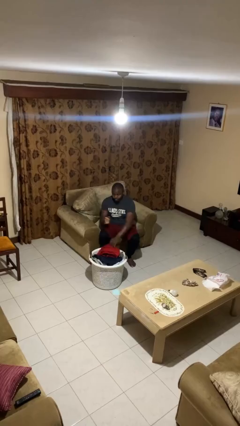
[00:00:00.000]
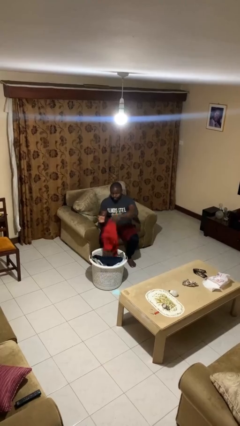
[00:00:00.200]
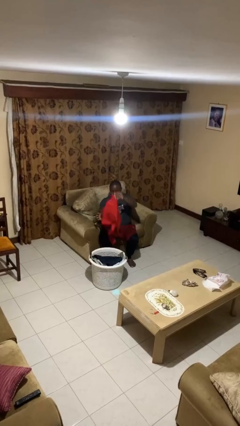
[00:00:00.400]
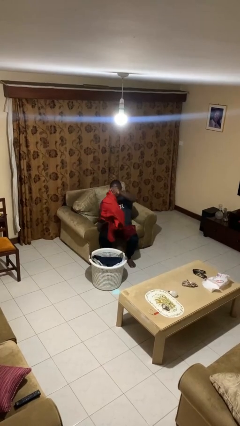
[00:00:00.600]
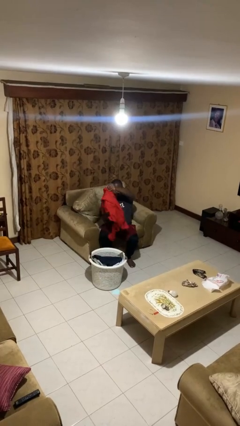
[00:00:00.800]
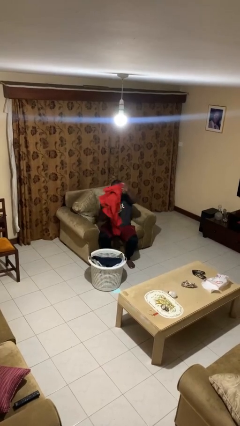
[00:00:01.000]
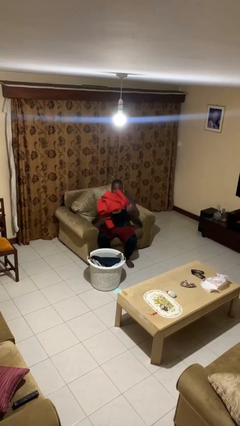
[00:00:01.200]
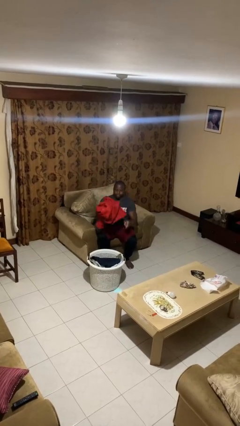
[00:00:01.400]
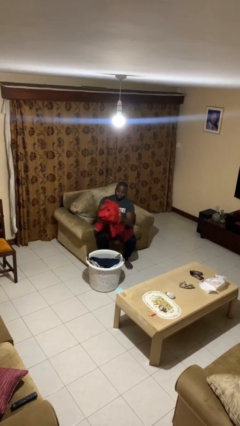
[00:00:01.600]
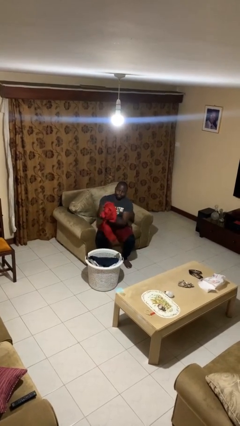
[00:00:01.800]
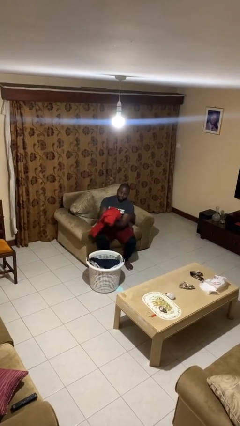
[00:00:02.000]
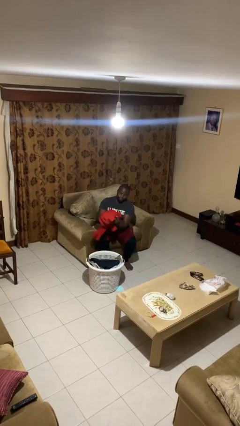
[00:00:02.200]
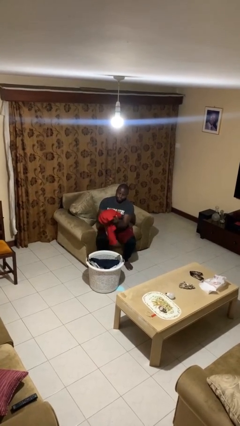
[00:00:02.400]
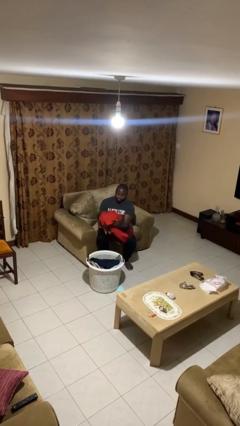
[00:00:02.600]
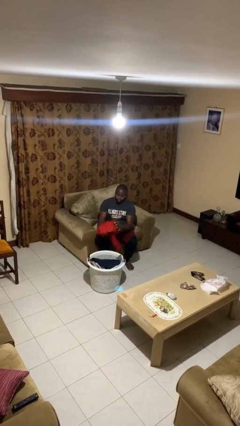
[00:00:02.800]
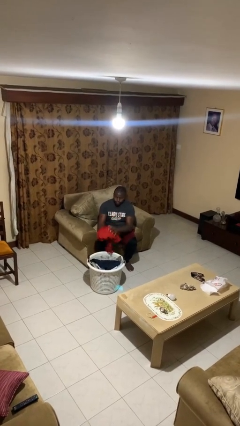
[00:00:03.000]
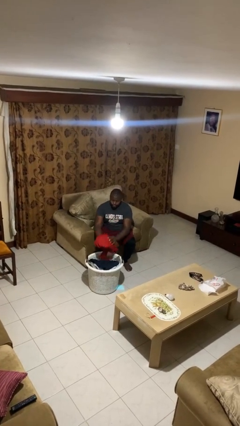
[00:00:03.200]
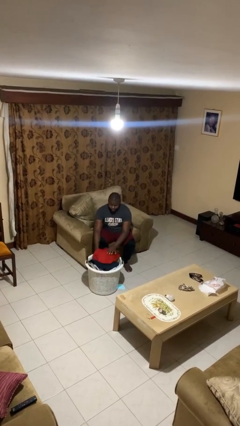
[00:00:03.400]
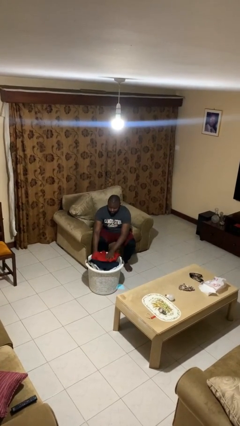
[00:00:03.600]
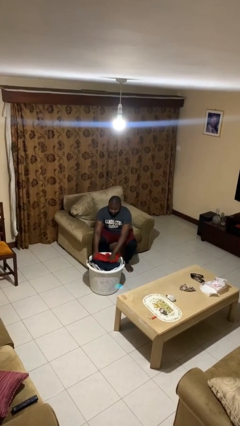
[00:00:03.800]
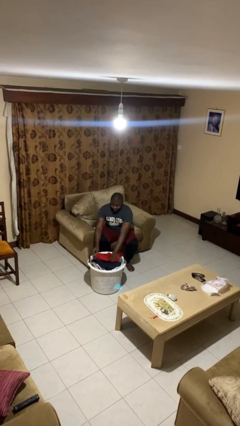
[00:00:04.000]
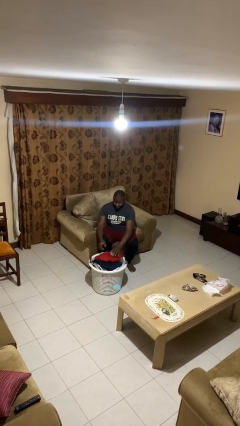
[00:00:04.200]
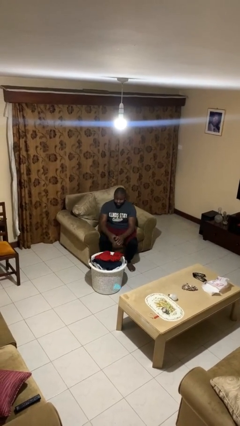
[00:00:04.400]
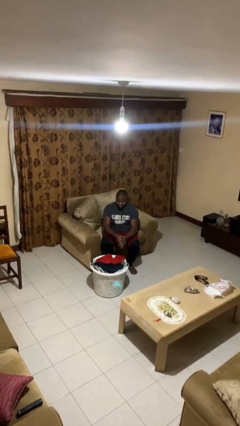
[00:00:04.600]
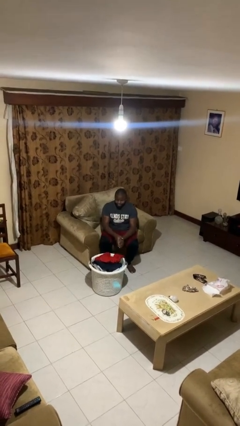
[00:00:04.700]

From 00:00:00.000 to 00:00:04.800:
person folds shirt

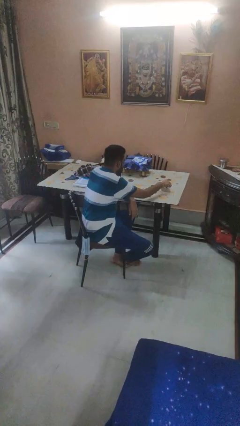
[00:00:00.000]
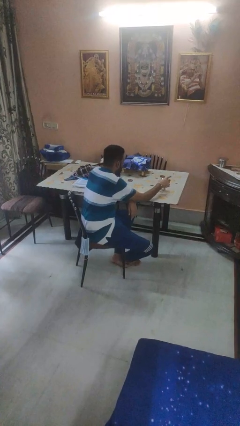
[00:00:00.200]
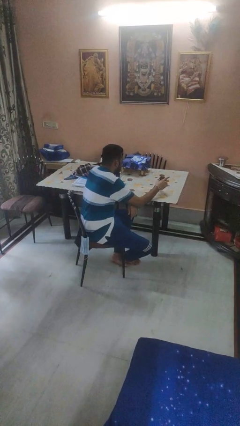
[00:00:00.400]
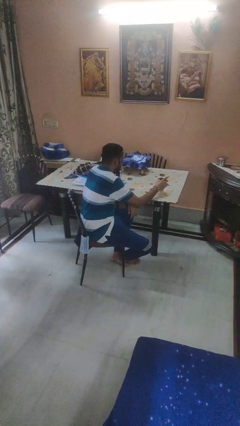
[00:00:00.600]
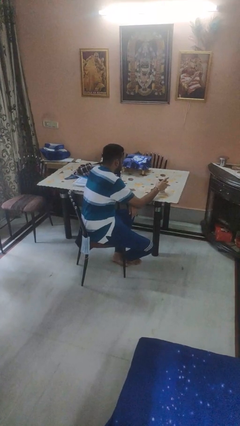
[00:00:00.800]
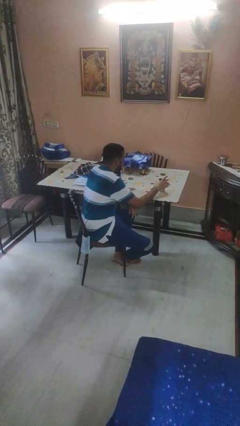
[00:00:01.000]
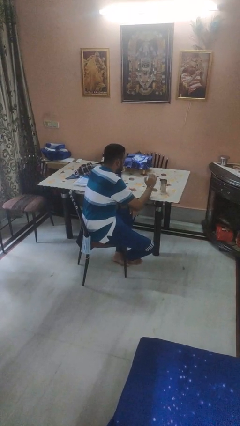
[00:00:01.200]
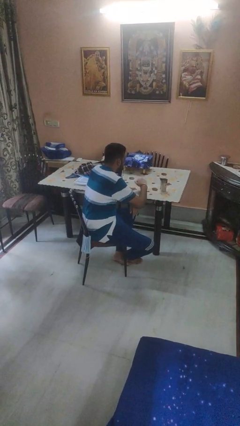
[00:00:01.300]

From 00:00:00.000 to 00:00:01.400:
person sets upright glass

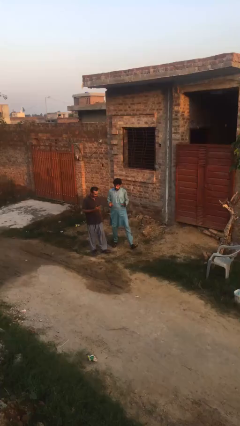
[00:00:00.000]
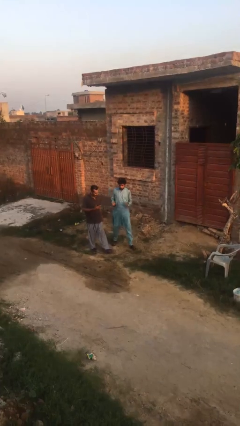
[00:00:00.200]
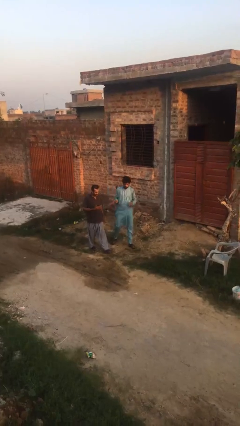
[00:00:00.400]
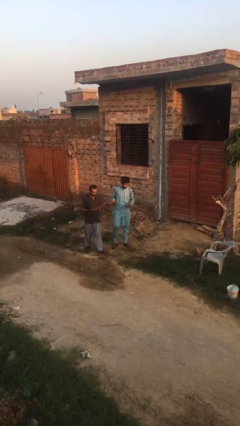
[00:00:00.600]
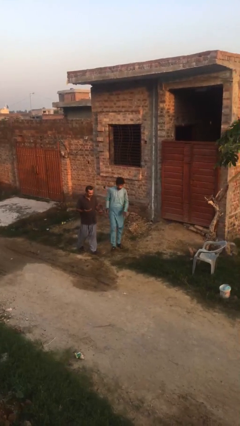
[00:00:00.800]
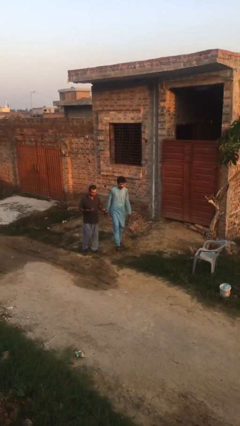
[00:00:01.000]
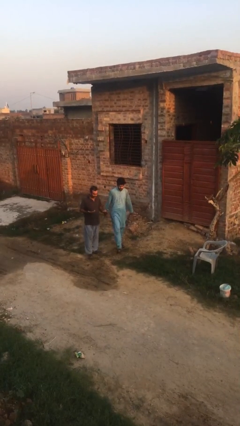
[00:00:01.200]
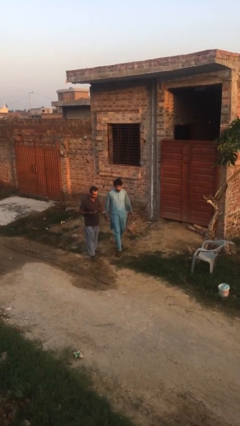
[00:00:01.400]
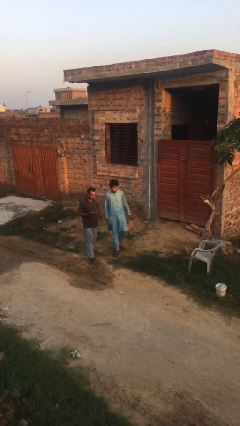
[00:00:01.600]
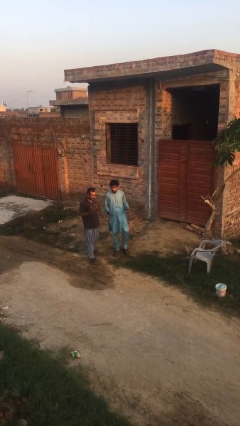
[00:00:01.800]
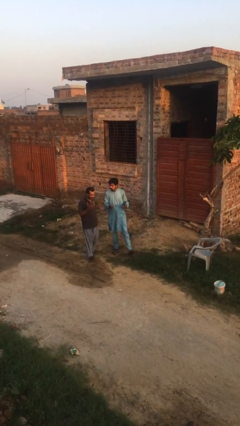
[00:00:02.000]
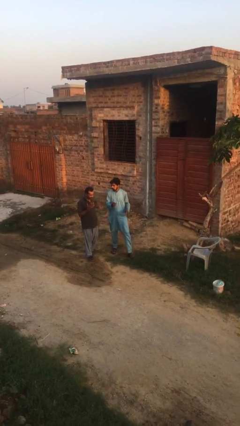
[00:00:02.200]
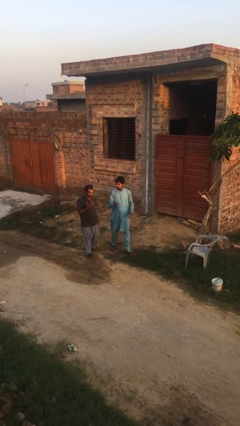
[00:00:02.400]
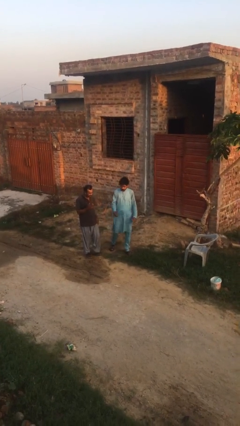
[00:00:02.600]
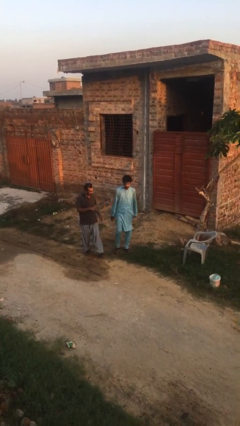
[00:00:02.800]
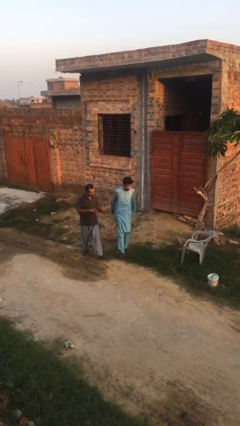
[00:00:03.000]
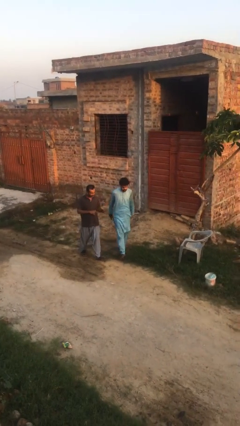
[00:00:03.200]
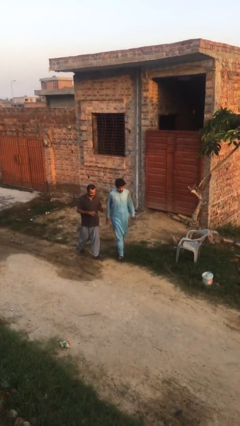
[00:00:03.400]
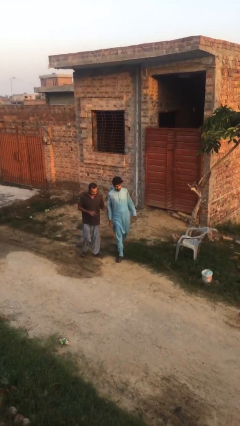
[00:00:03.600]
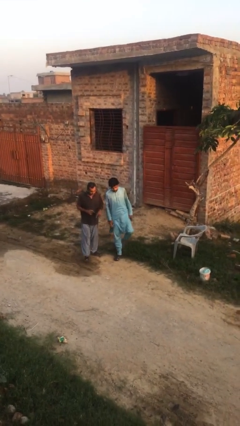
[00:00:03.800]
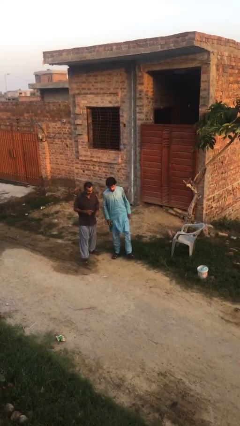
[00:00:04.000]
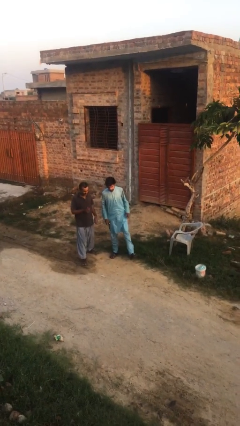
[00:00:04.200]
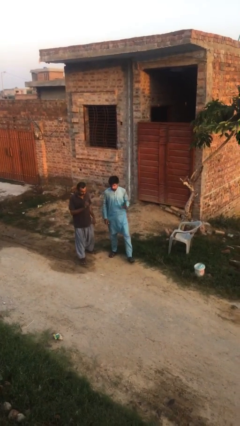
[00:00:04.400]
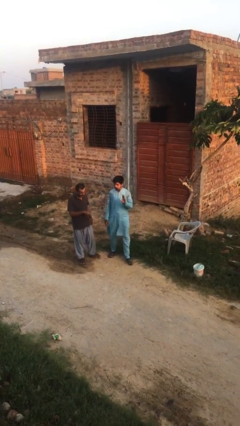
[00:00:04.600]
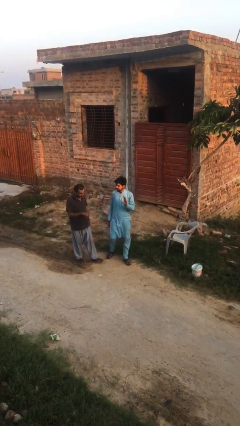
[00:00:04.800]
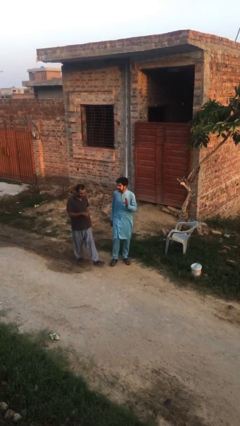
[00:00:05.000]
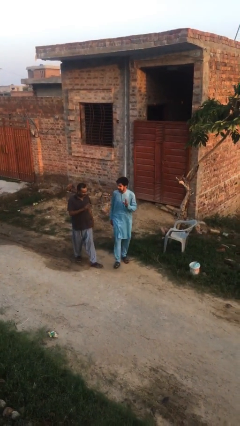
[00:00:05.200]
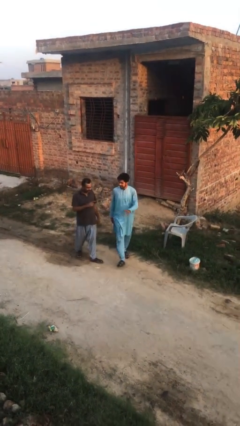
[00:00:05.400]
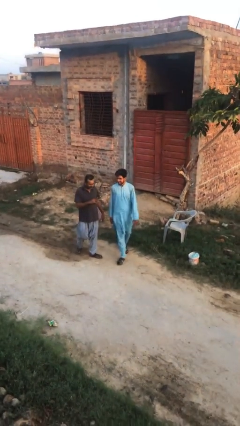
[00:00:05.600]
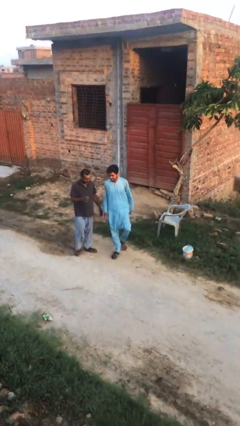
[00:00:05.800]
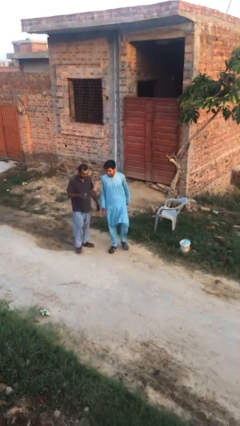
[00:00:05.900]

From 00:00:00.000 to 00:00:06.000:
person talks to person

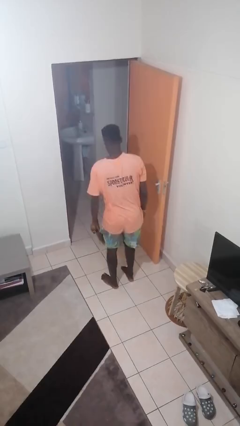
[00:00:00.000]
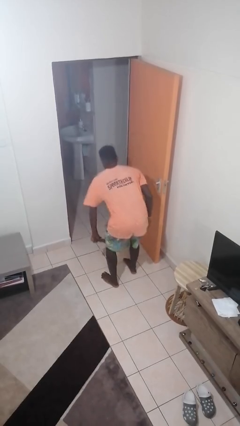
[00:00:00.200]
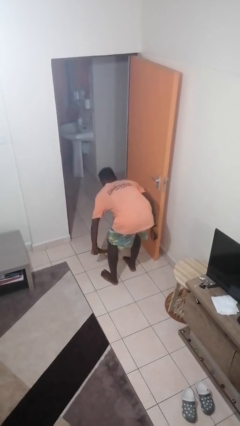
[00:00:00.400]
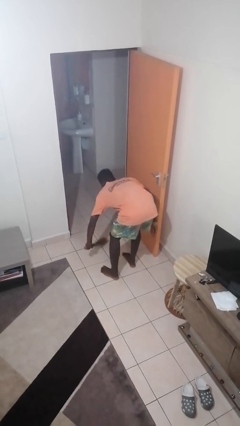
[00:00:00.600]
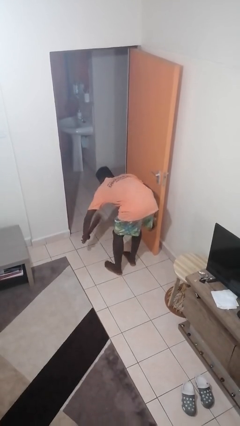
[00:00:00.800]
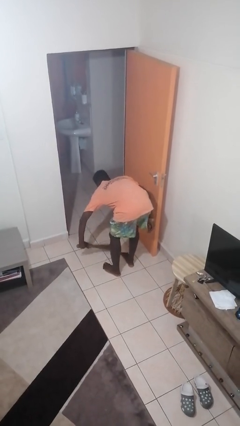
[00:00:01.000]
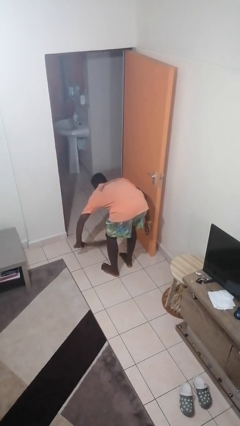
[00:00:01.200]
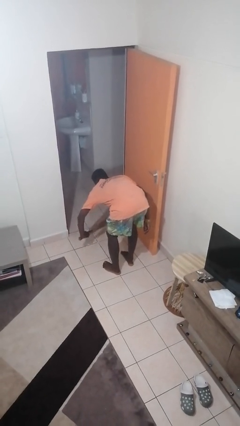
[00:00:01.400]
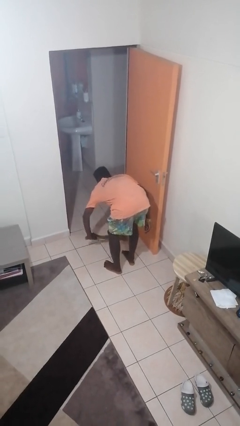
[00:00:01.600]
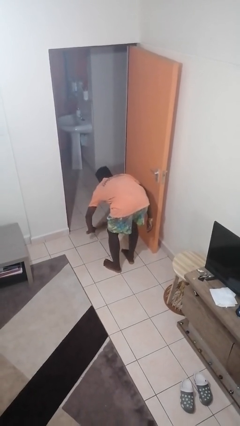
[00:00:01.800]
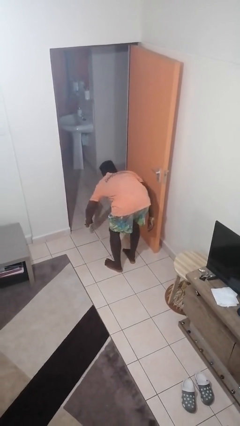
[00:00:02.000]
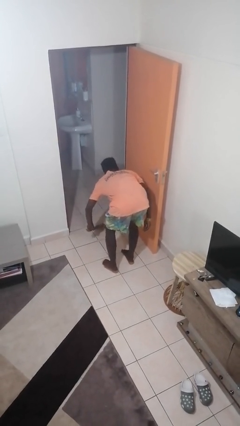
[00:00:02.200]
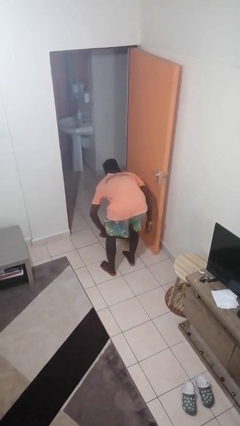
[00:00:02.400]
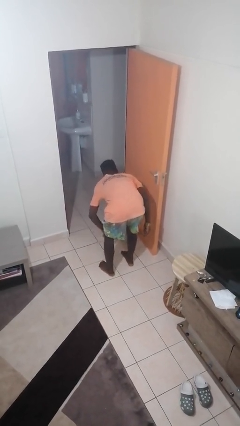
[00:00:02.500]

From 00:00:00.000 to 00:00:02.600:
person sweeps floor

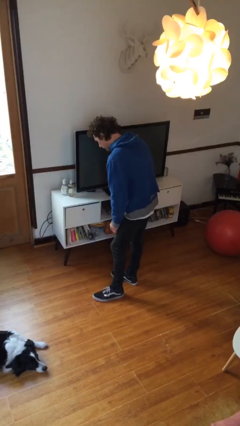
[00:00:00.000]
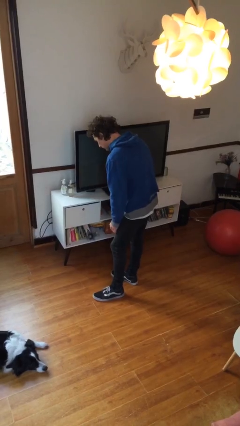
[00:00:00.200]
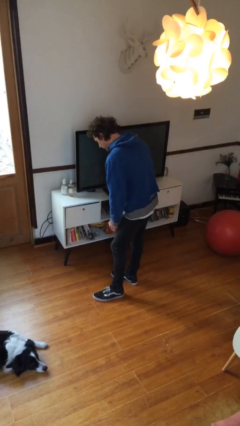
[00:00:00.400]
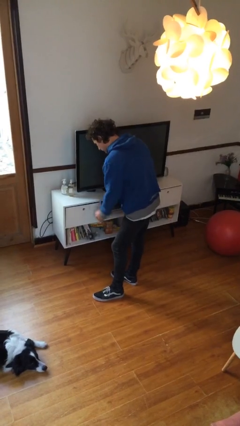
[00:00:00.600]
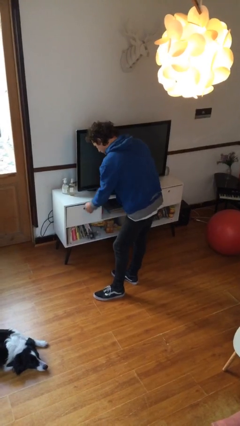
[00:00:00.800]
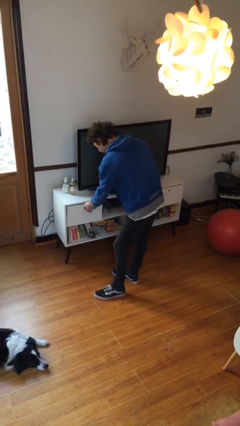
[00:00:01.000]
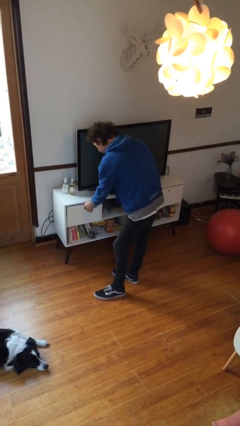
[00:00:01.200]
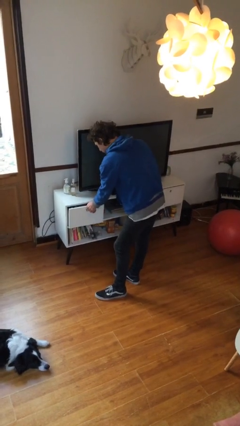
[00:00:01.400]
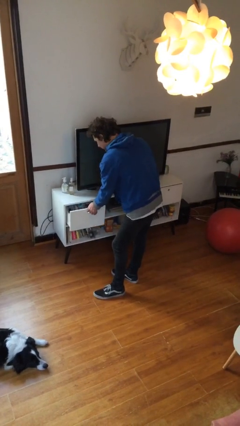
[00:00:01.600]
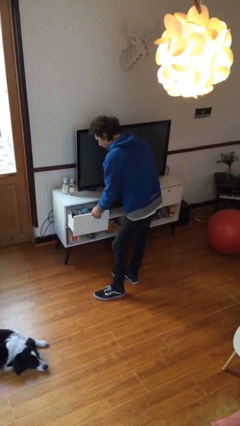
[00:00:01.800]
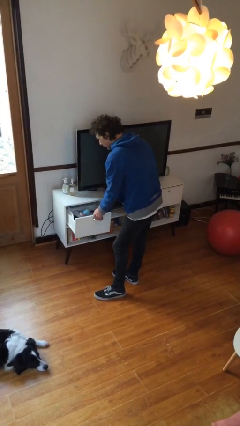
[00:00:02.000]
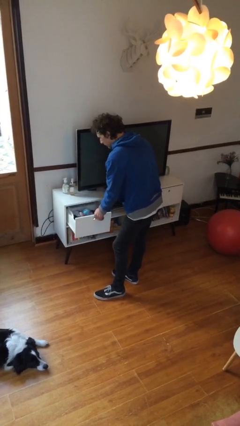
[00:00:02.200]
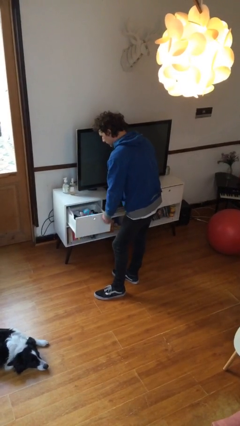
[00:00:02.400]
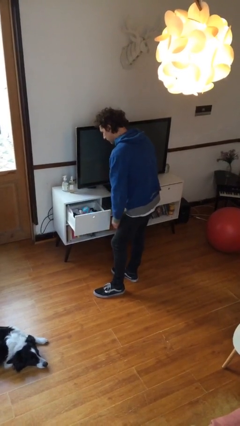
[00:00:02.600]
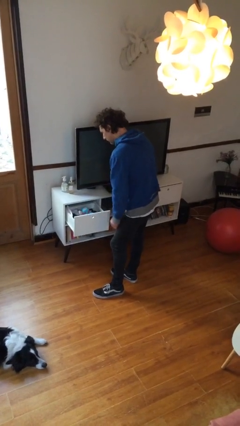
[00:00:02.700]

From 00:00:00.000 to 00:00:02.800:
person opens dresser drawer
